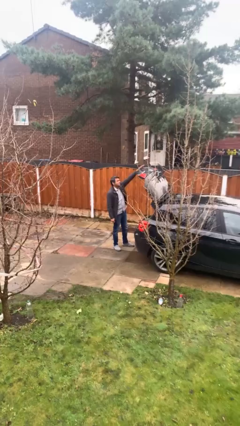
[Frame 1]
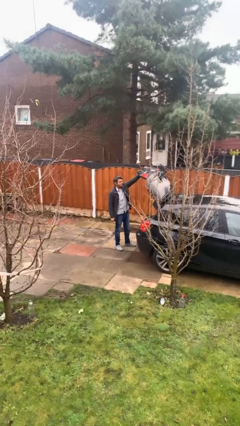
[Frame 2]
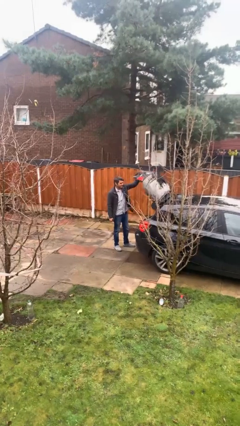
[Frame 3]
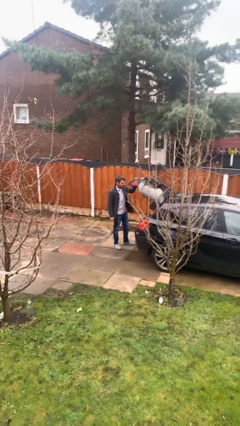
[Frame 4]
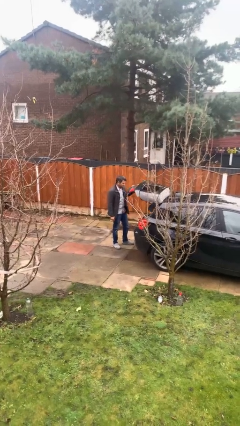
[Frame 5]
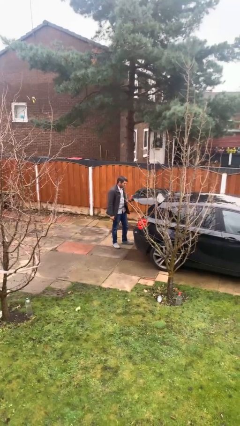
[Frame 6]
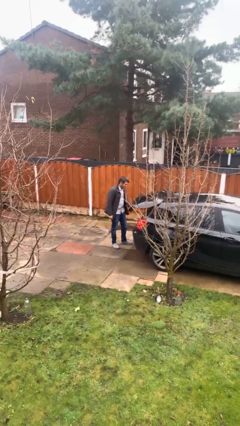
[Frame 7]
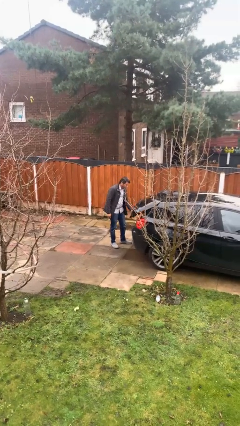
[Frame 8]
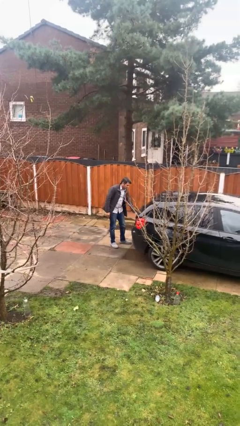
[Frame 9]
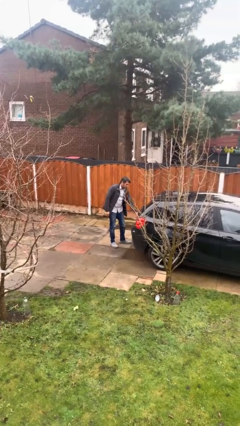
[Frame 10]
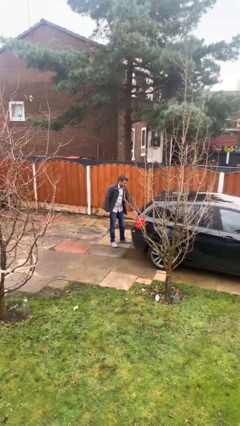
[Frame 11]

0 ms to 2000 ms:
person closes car trunk

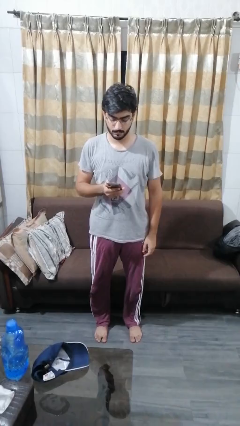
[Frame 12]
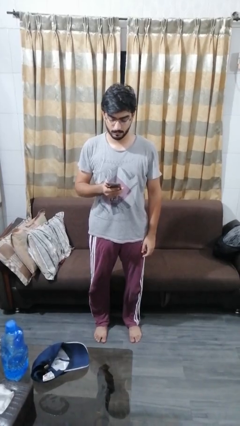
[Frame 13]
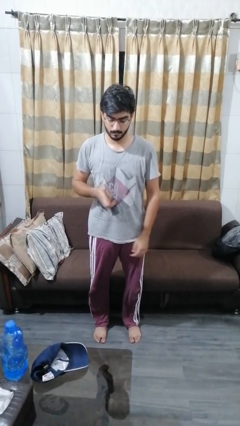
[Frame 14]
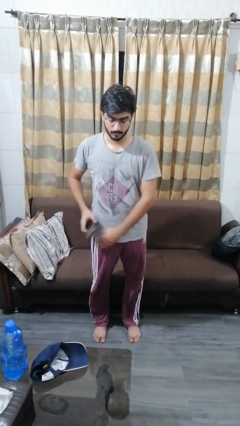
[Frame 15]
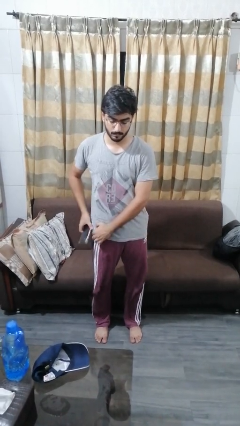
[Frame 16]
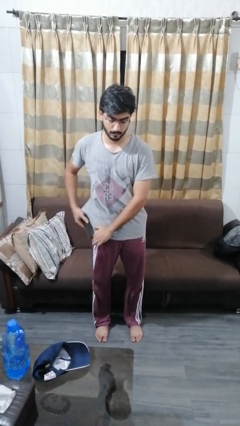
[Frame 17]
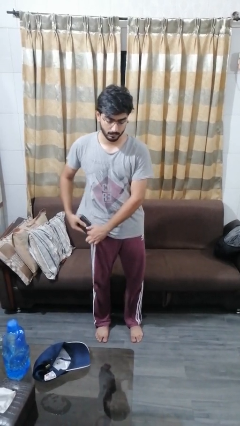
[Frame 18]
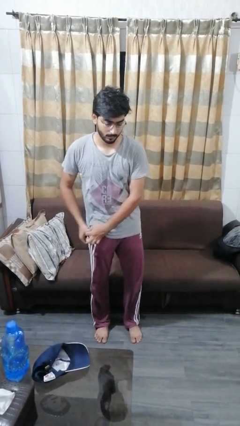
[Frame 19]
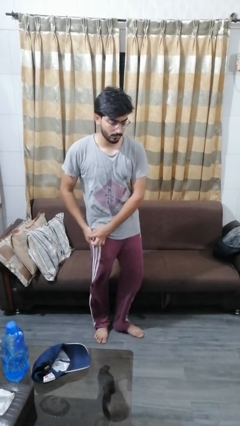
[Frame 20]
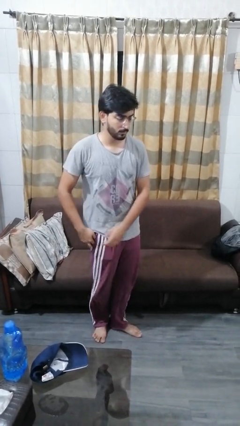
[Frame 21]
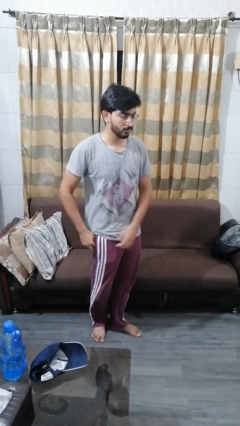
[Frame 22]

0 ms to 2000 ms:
person puts phone into pocket

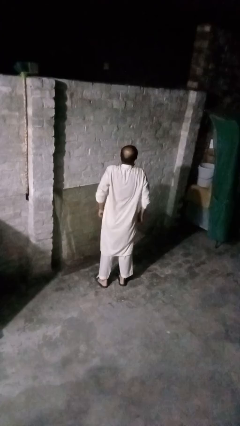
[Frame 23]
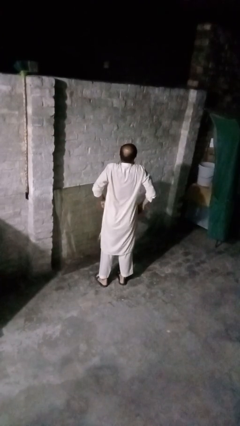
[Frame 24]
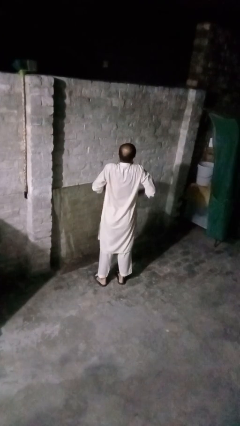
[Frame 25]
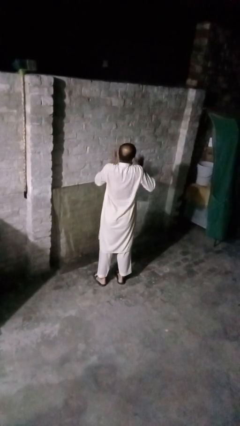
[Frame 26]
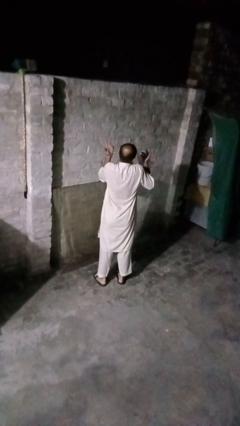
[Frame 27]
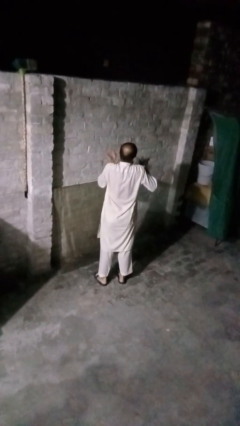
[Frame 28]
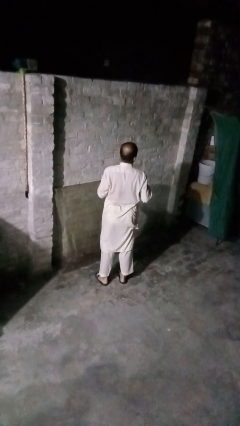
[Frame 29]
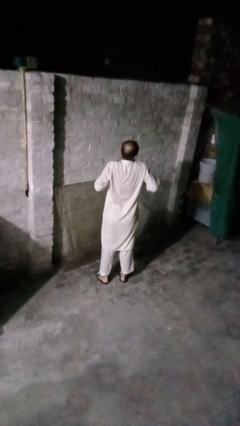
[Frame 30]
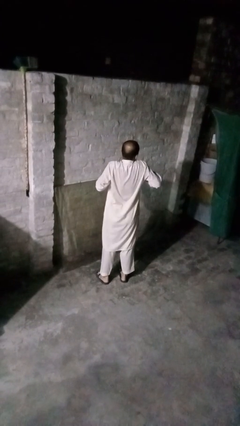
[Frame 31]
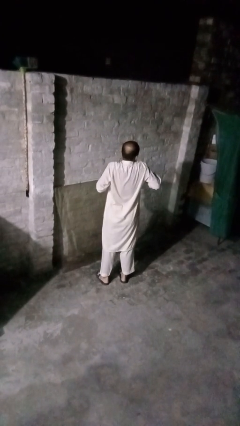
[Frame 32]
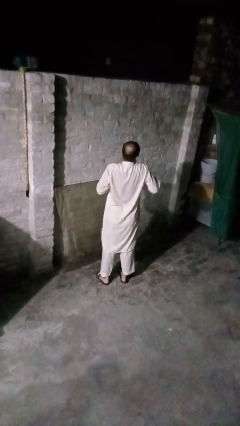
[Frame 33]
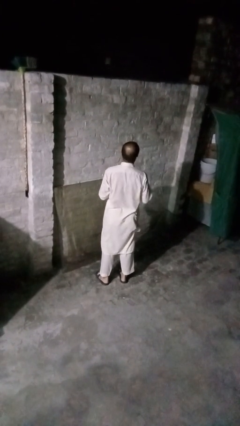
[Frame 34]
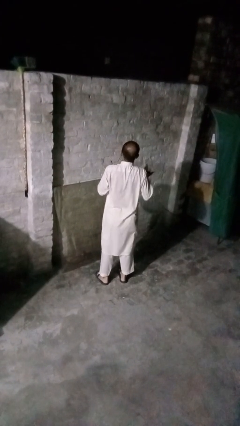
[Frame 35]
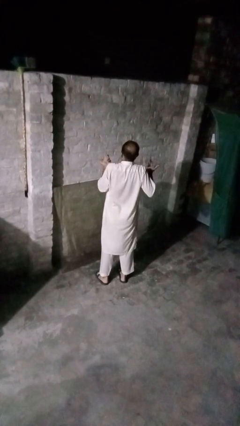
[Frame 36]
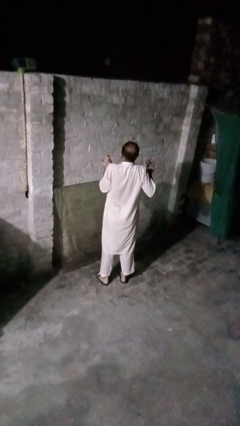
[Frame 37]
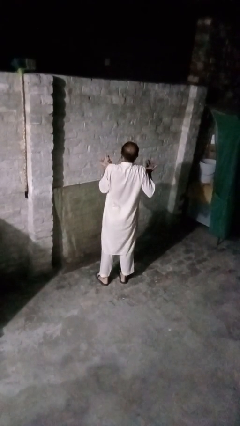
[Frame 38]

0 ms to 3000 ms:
person shrugs

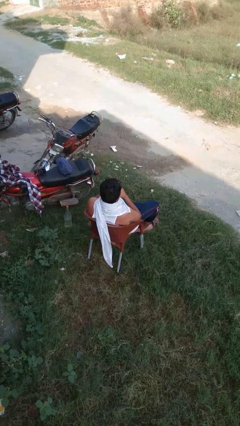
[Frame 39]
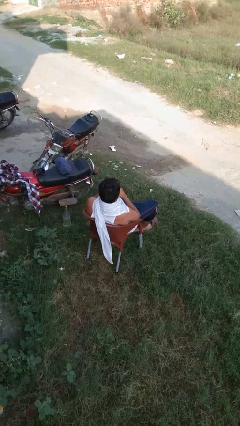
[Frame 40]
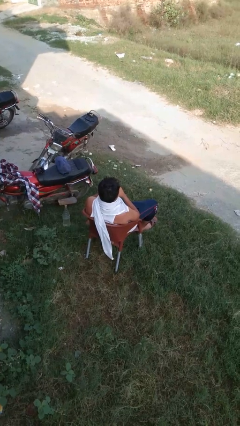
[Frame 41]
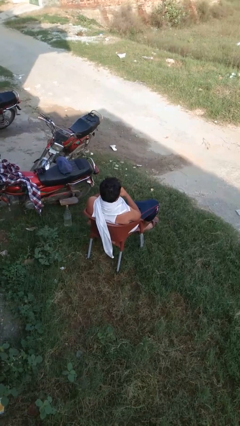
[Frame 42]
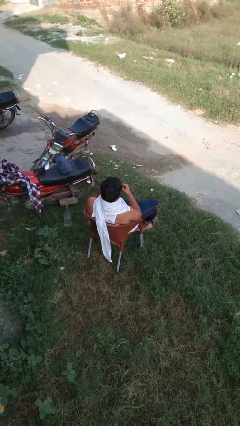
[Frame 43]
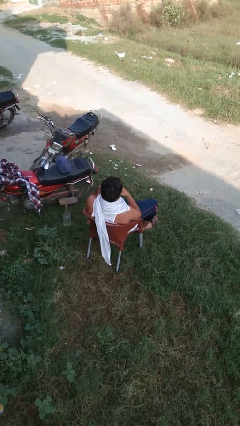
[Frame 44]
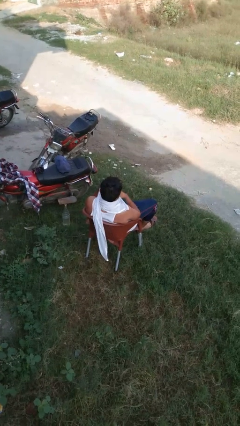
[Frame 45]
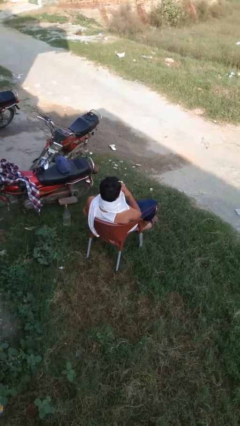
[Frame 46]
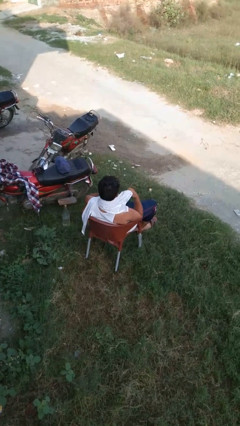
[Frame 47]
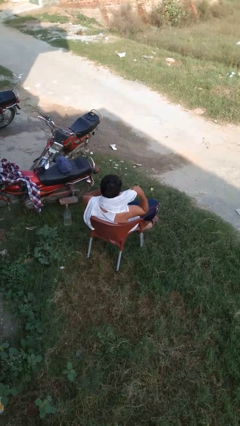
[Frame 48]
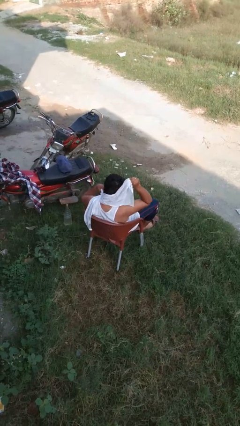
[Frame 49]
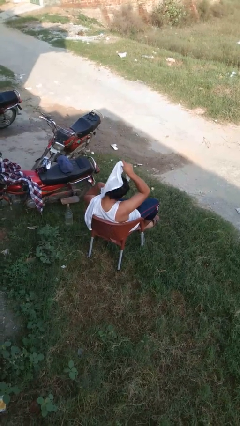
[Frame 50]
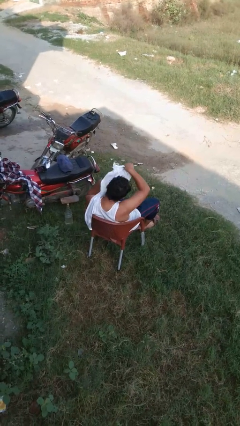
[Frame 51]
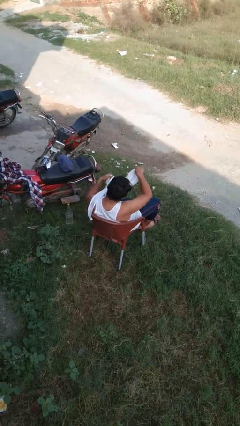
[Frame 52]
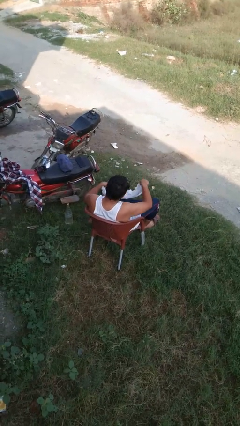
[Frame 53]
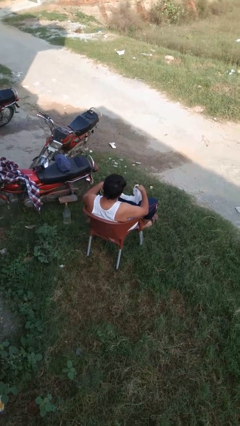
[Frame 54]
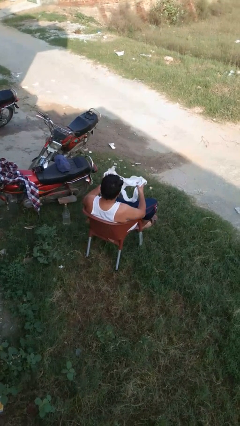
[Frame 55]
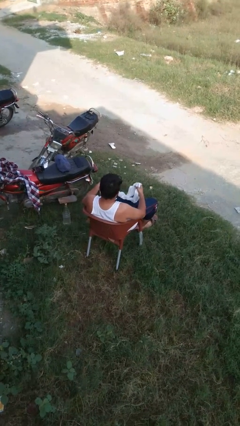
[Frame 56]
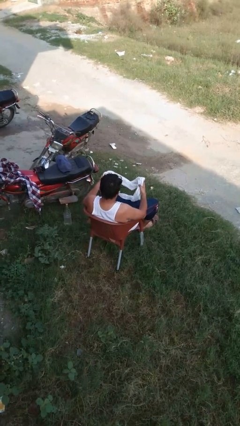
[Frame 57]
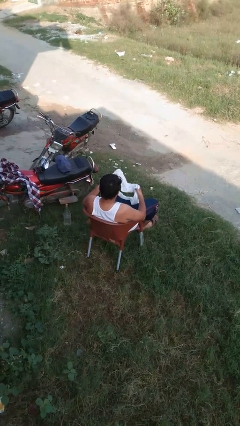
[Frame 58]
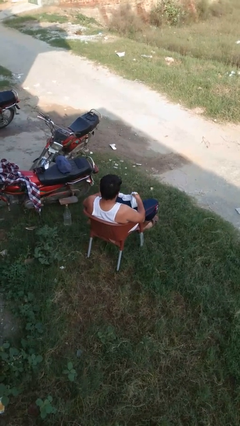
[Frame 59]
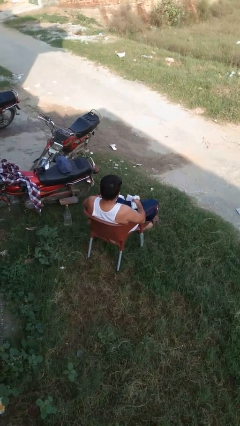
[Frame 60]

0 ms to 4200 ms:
person takes off scarf

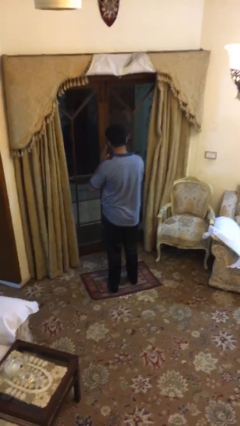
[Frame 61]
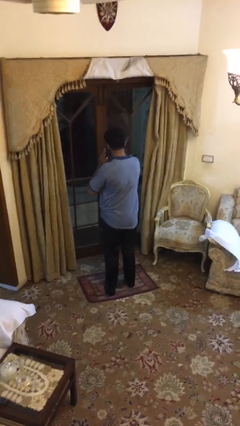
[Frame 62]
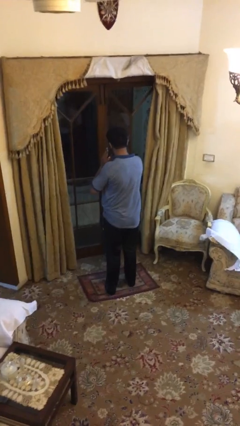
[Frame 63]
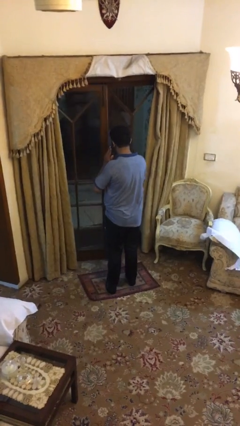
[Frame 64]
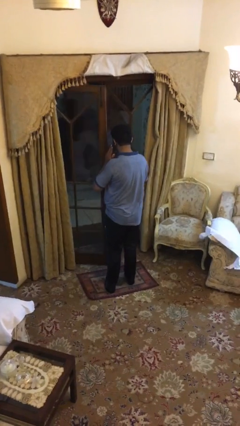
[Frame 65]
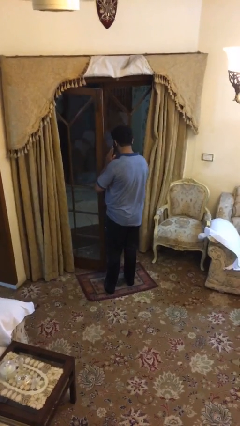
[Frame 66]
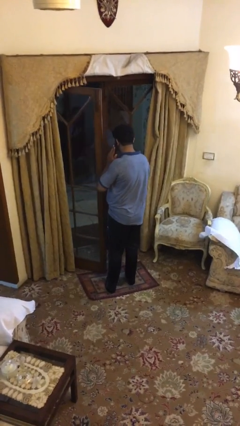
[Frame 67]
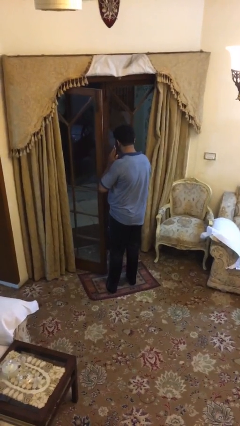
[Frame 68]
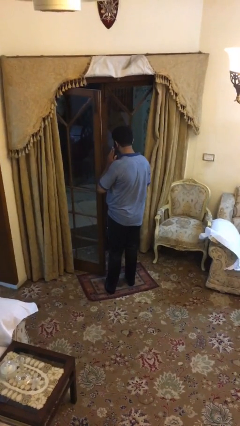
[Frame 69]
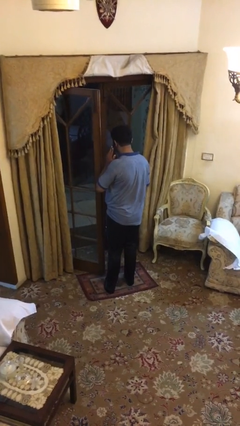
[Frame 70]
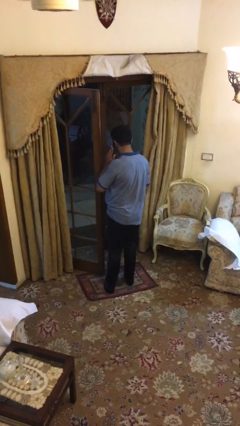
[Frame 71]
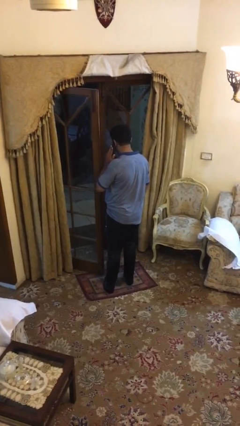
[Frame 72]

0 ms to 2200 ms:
person opens facility door

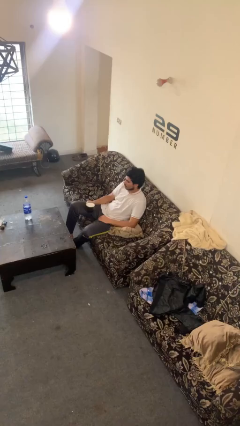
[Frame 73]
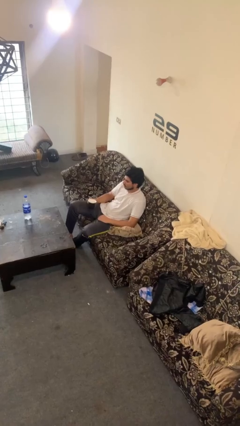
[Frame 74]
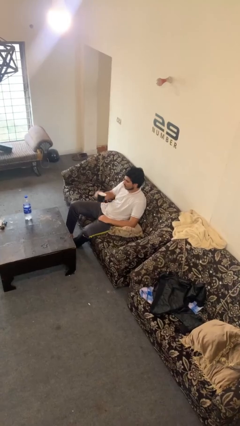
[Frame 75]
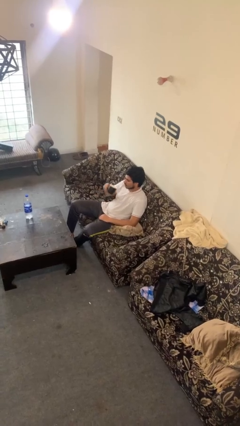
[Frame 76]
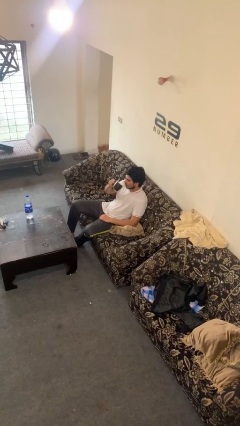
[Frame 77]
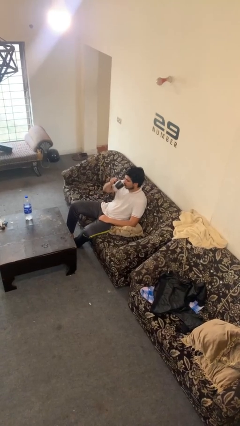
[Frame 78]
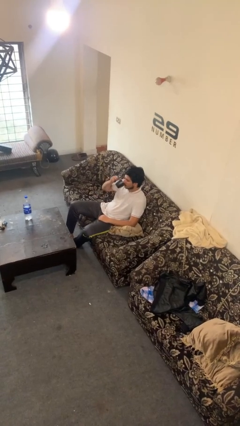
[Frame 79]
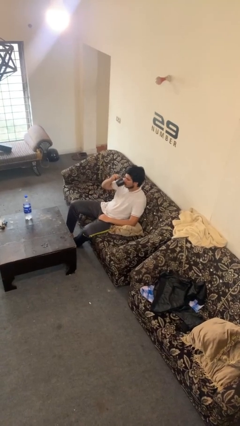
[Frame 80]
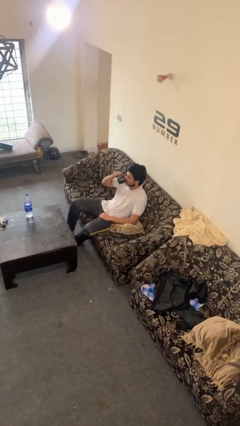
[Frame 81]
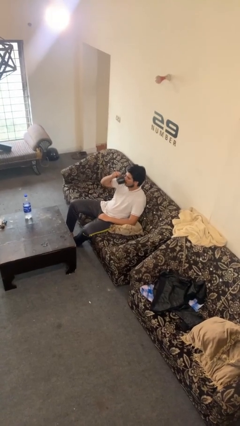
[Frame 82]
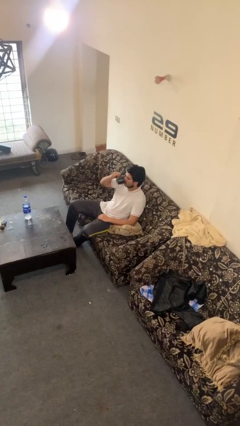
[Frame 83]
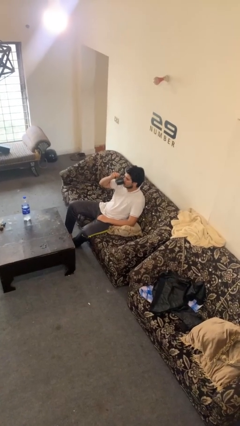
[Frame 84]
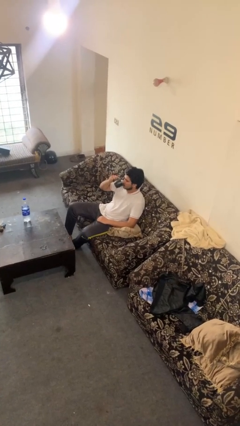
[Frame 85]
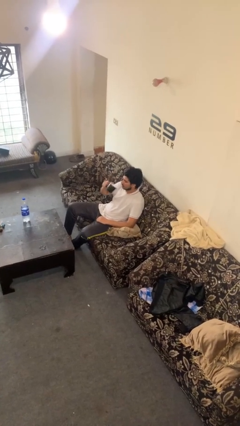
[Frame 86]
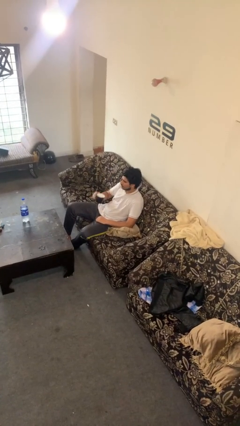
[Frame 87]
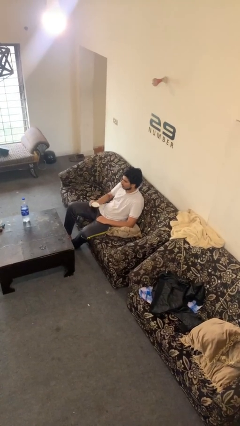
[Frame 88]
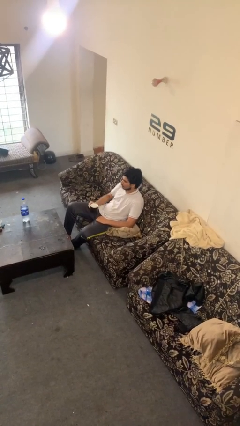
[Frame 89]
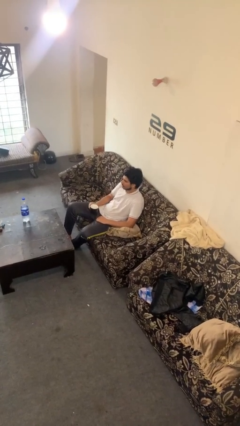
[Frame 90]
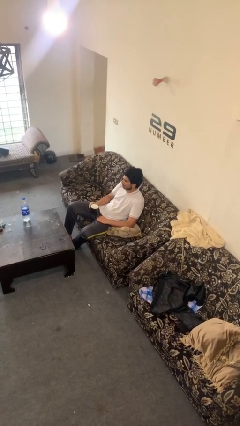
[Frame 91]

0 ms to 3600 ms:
person drinks from mug

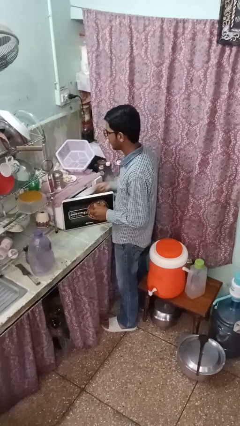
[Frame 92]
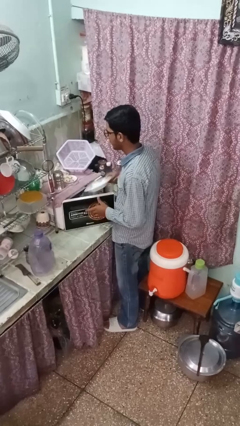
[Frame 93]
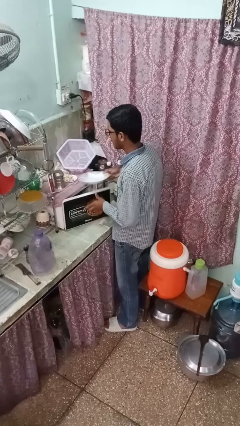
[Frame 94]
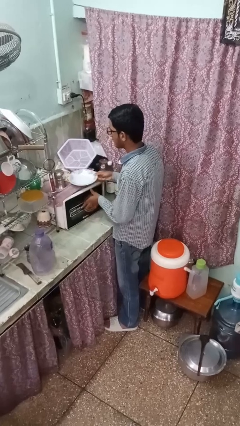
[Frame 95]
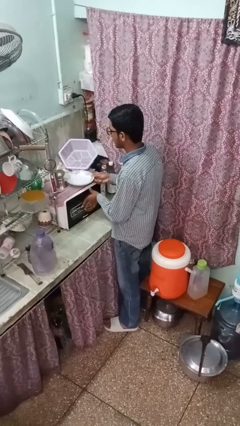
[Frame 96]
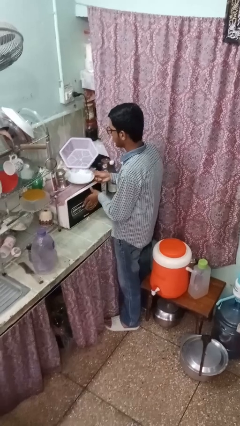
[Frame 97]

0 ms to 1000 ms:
person takes object from oven
